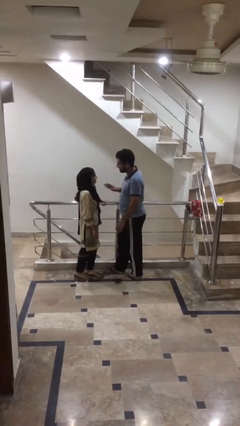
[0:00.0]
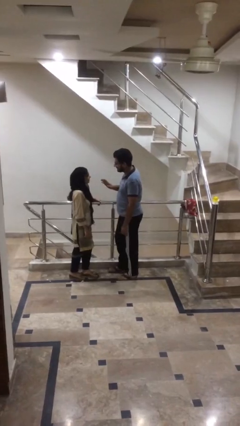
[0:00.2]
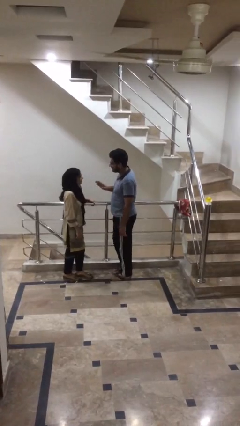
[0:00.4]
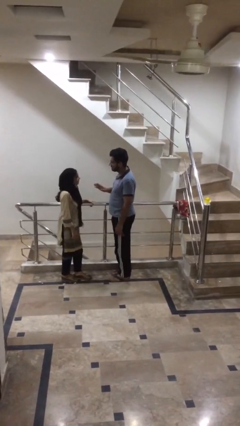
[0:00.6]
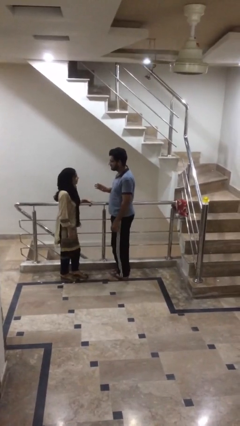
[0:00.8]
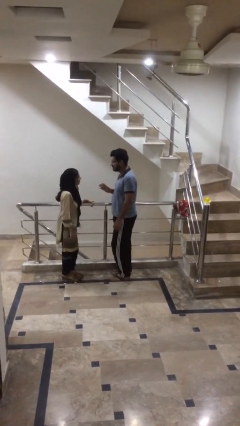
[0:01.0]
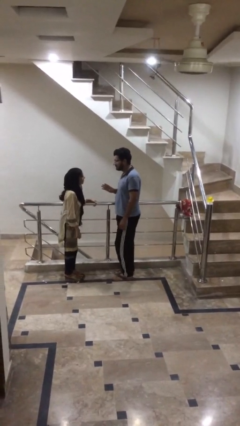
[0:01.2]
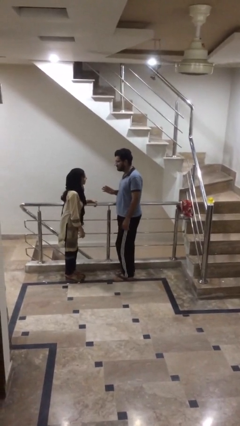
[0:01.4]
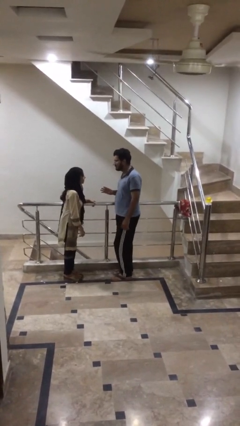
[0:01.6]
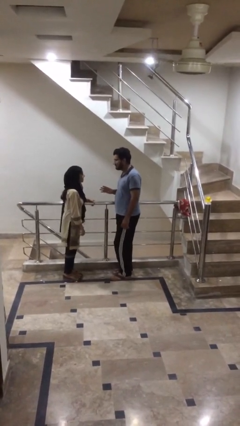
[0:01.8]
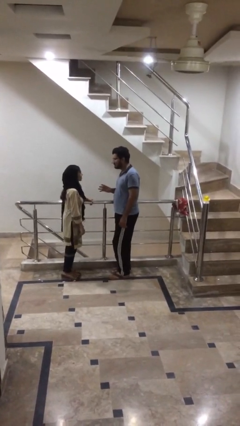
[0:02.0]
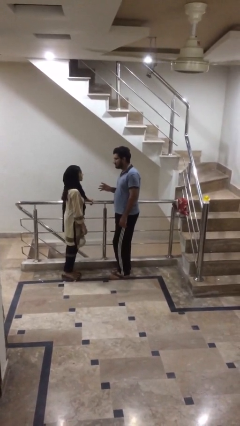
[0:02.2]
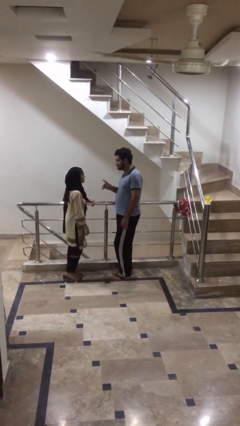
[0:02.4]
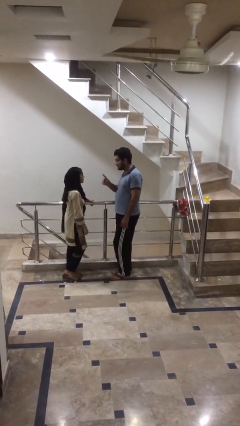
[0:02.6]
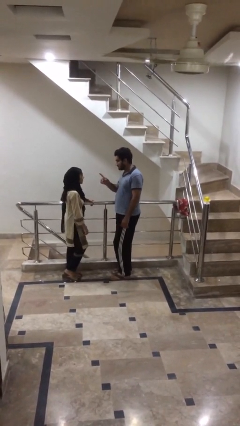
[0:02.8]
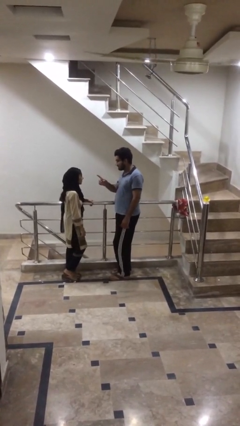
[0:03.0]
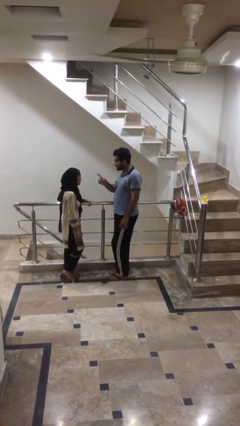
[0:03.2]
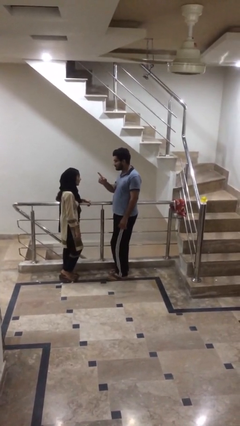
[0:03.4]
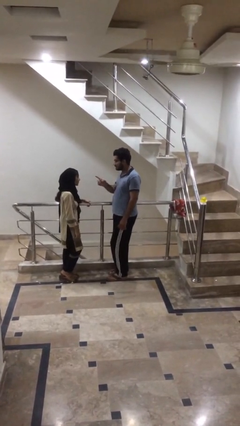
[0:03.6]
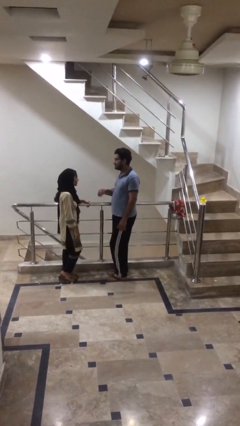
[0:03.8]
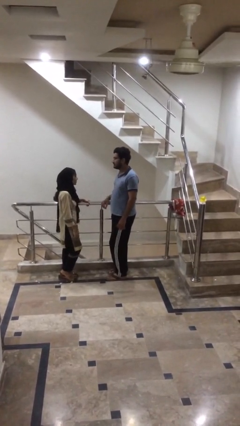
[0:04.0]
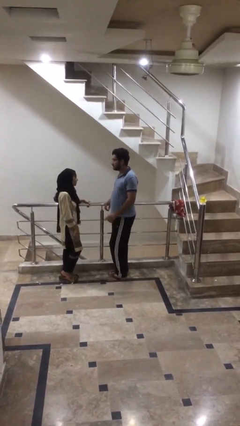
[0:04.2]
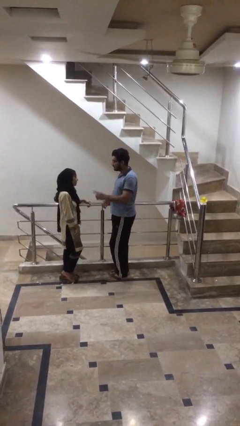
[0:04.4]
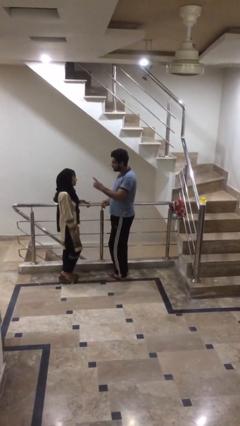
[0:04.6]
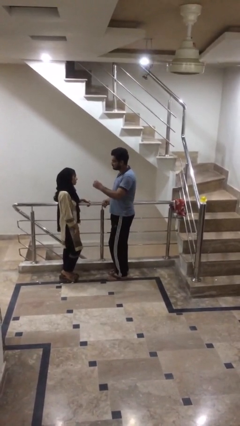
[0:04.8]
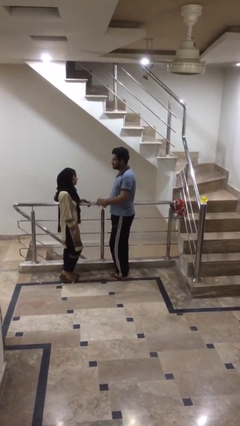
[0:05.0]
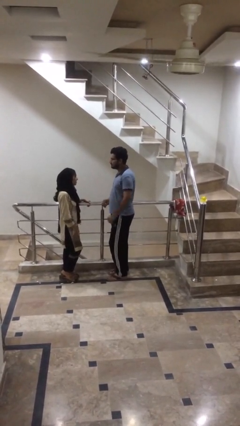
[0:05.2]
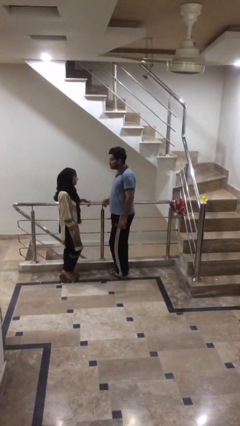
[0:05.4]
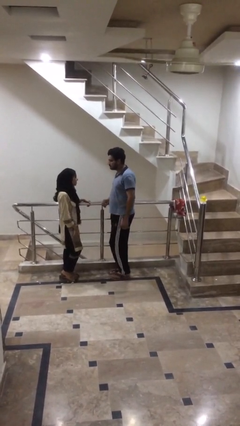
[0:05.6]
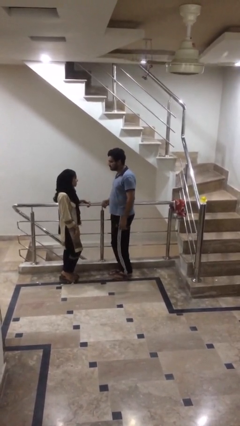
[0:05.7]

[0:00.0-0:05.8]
person talks to person

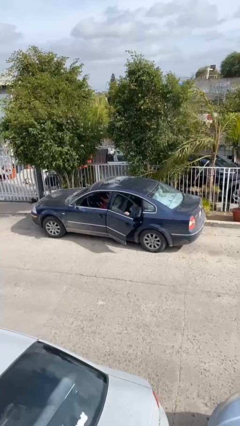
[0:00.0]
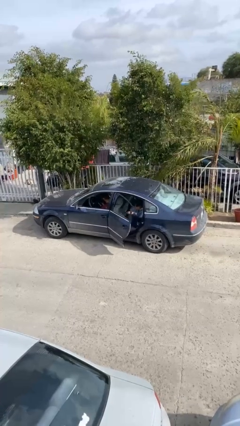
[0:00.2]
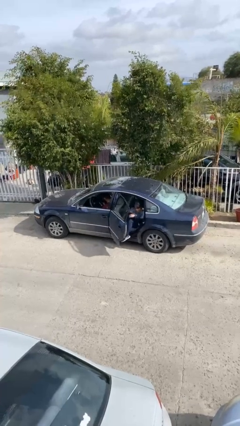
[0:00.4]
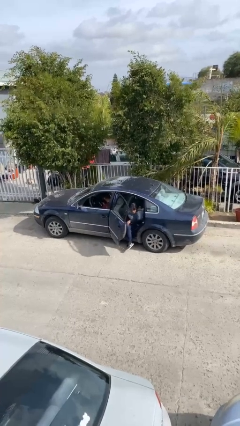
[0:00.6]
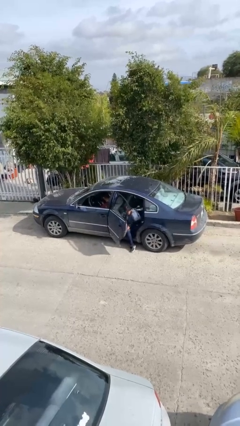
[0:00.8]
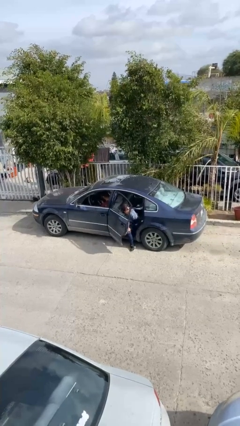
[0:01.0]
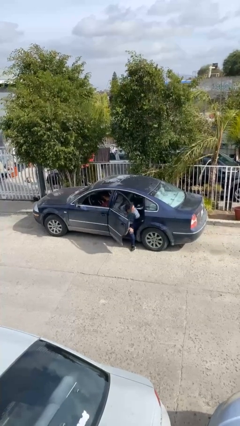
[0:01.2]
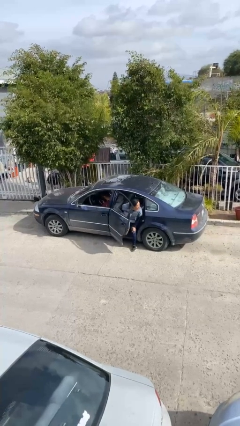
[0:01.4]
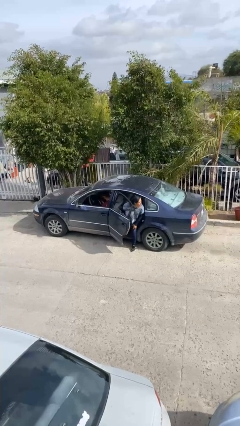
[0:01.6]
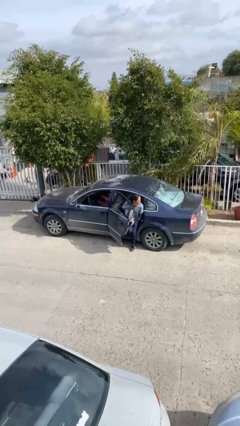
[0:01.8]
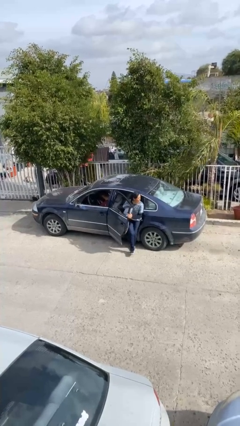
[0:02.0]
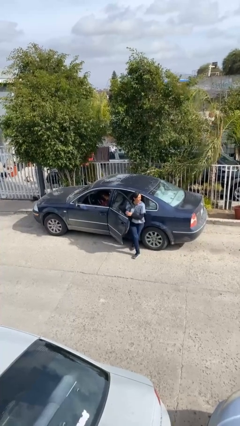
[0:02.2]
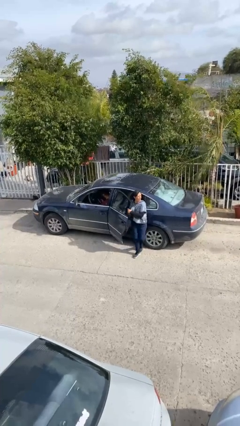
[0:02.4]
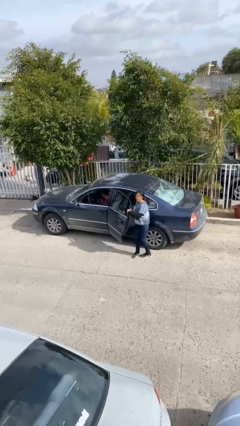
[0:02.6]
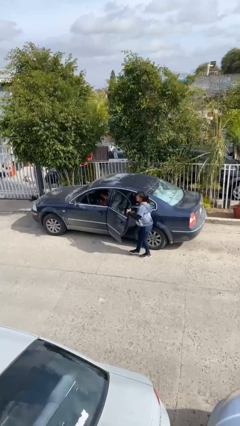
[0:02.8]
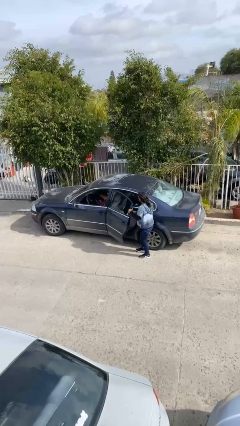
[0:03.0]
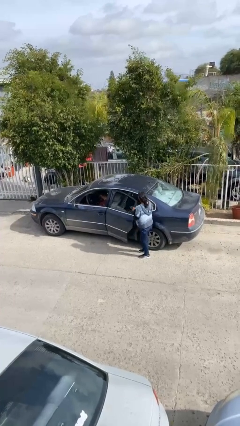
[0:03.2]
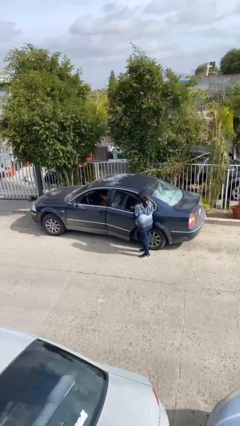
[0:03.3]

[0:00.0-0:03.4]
car drops off person

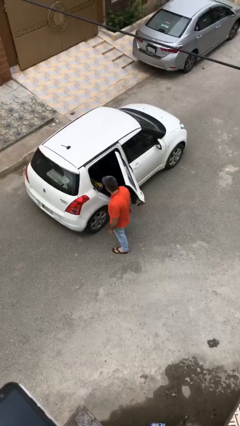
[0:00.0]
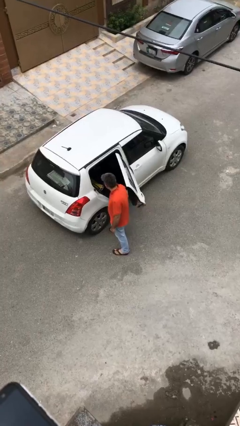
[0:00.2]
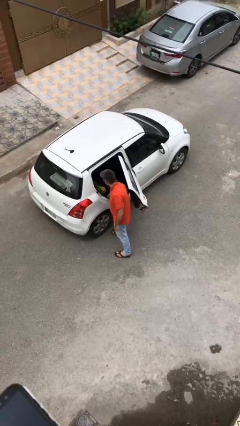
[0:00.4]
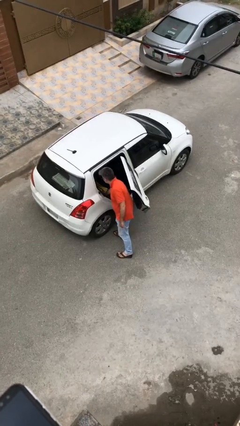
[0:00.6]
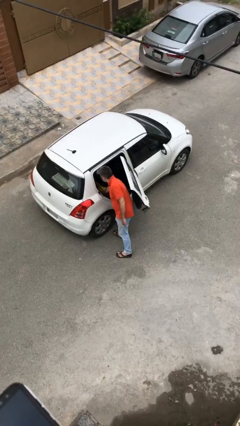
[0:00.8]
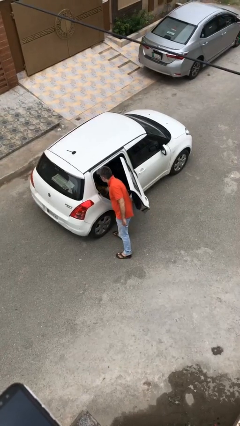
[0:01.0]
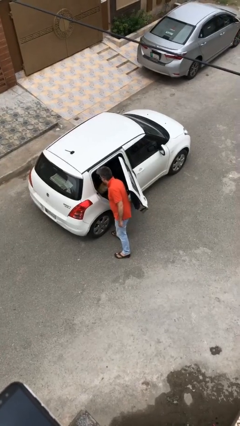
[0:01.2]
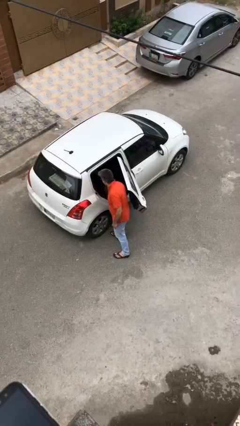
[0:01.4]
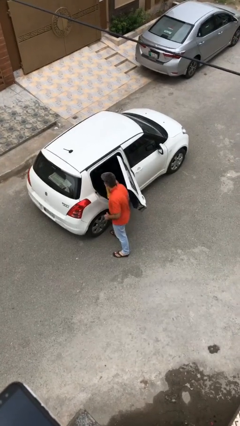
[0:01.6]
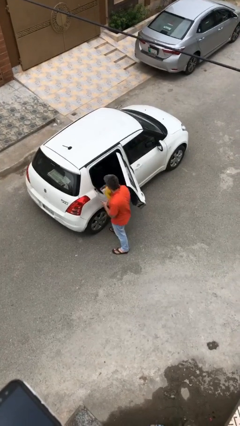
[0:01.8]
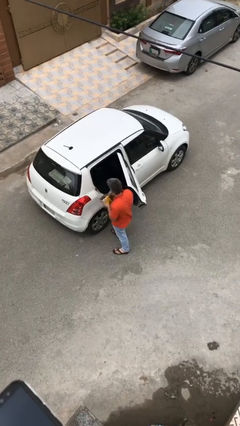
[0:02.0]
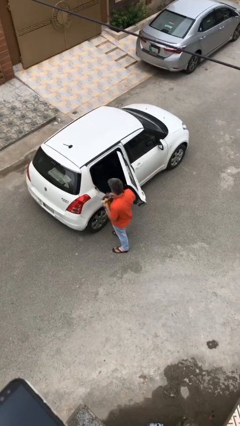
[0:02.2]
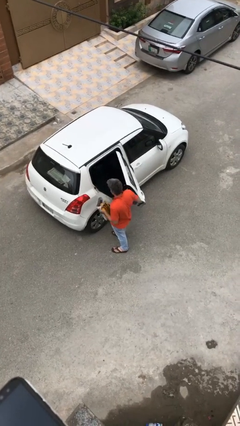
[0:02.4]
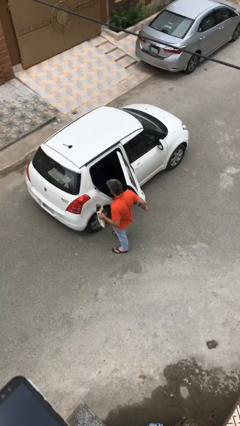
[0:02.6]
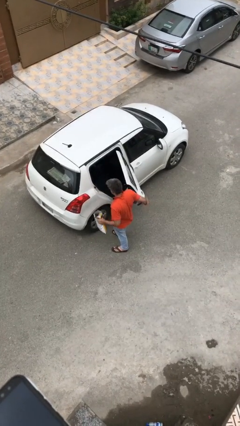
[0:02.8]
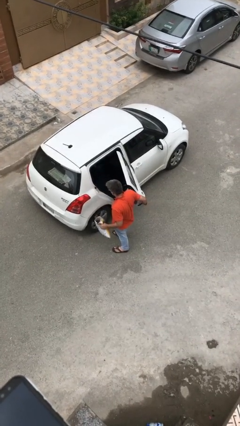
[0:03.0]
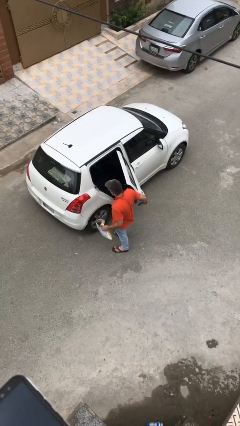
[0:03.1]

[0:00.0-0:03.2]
person unloads car

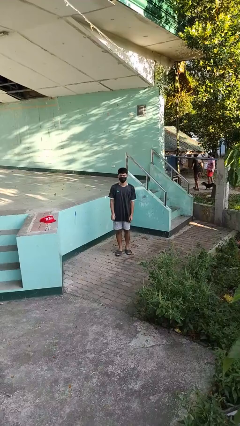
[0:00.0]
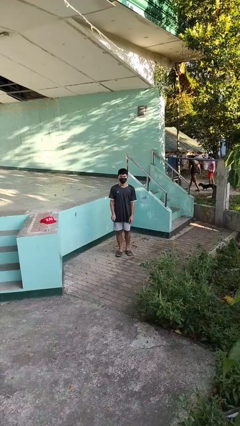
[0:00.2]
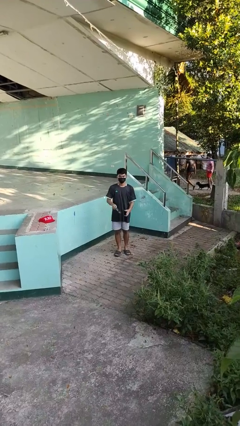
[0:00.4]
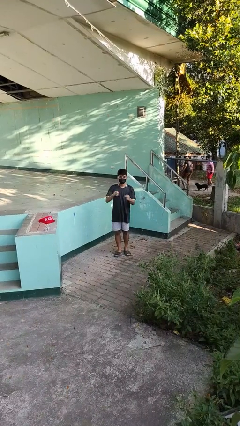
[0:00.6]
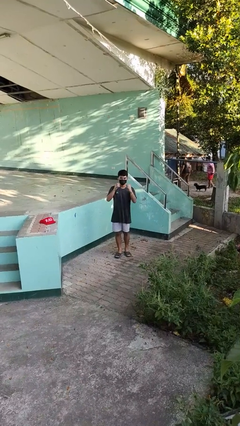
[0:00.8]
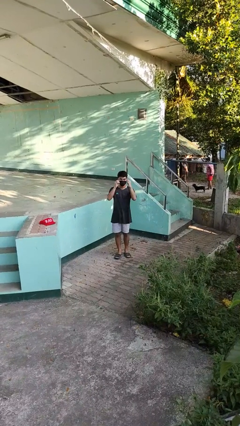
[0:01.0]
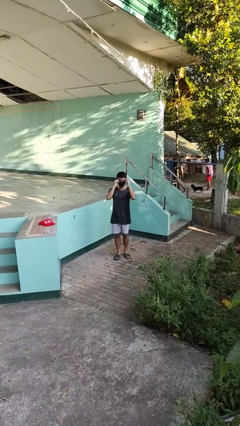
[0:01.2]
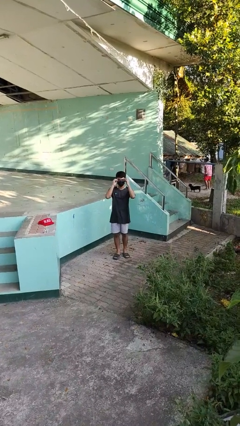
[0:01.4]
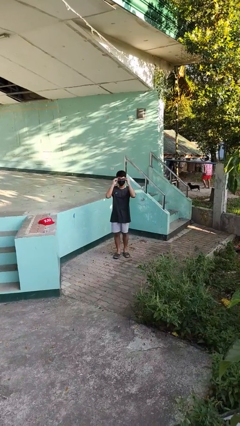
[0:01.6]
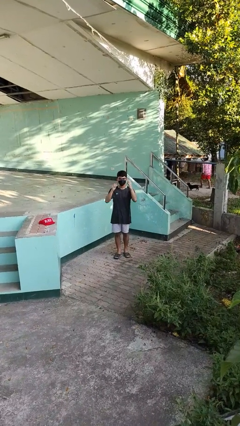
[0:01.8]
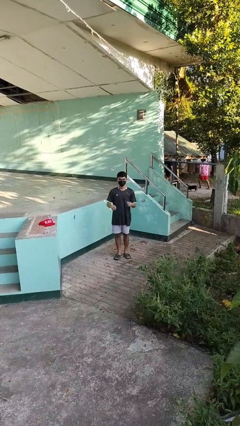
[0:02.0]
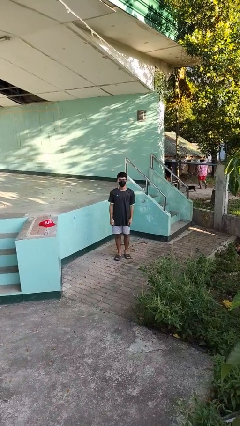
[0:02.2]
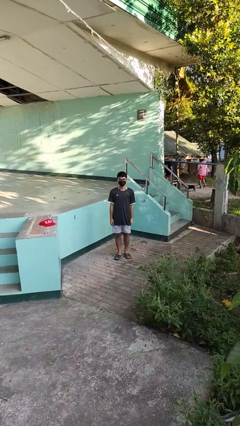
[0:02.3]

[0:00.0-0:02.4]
person puts on glasses

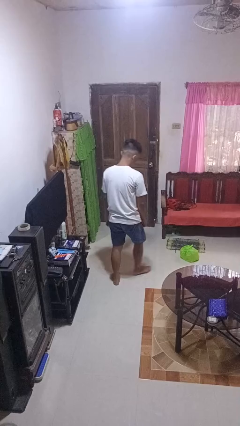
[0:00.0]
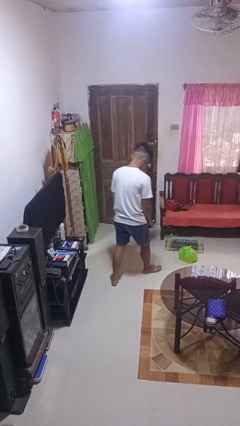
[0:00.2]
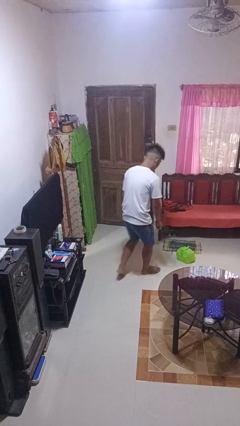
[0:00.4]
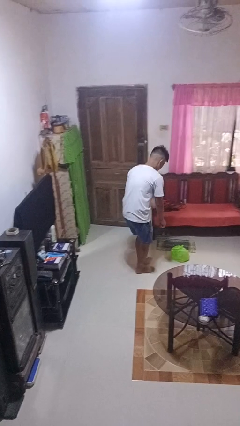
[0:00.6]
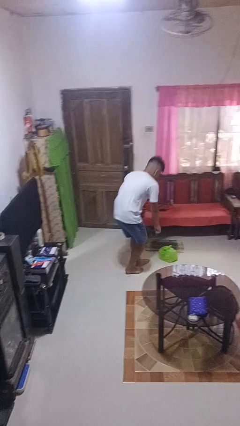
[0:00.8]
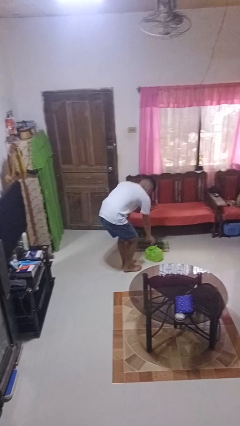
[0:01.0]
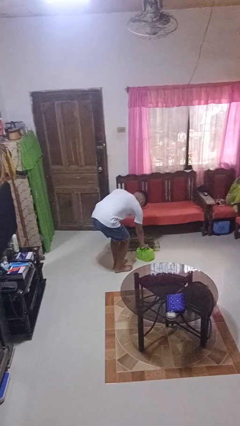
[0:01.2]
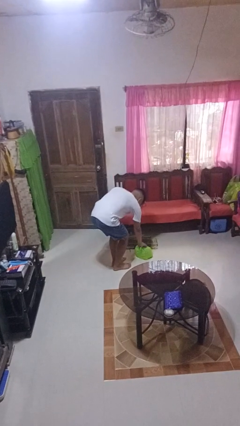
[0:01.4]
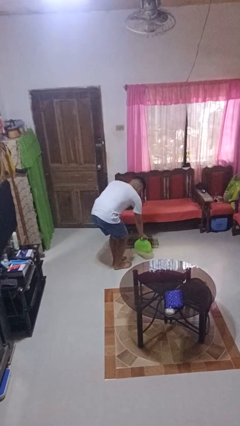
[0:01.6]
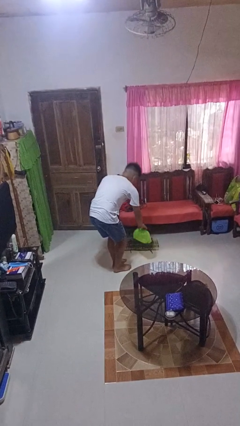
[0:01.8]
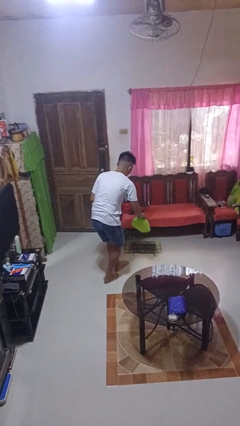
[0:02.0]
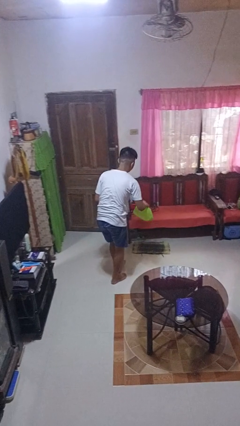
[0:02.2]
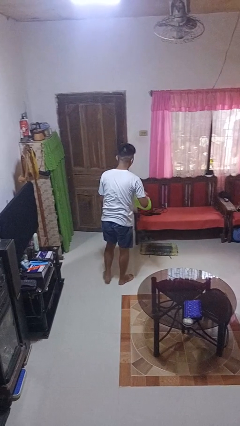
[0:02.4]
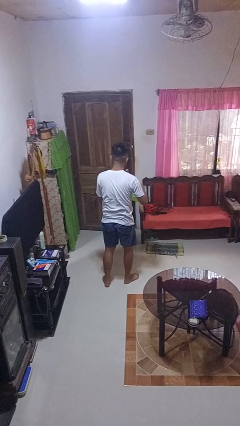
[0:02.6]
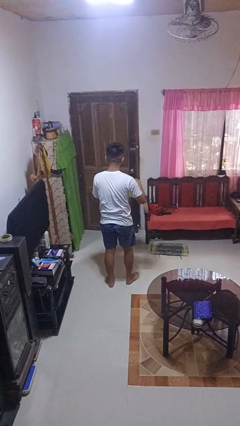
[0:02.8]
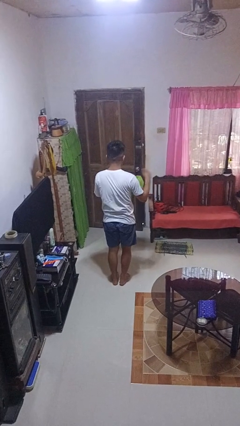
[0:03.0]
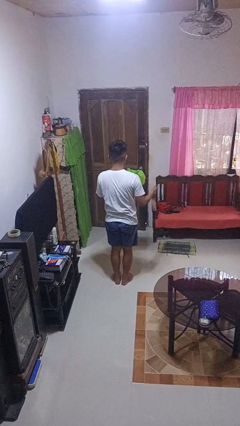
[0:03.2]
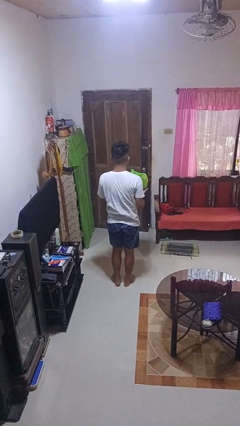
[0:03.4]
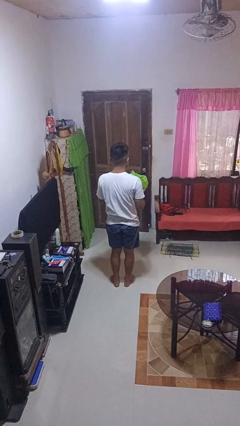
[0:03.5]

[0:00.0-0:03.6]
person picks up object from floor
